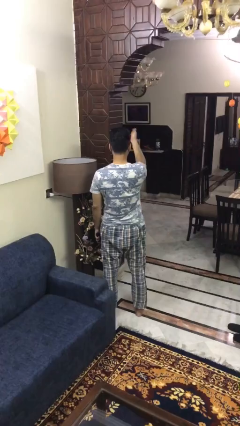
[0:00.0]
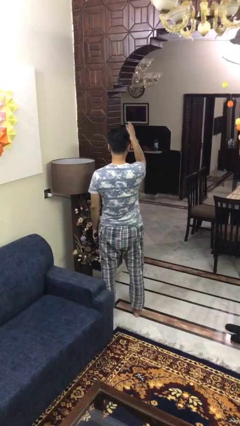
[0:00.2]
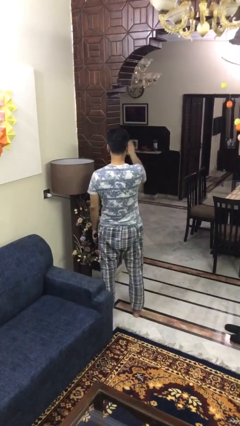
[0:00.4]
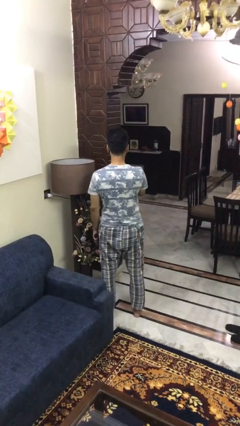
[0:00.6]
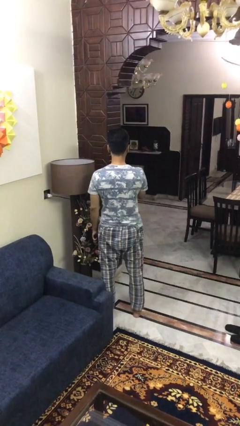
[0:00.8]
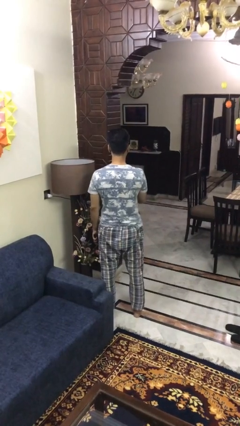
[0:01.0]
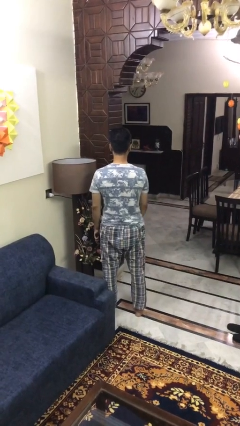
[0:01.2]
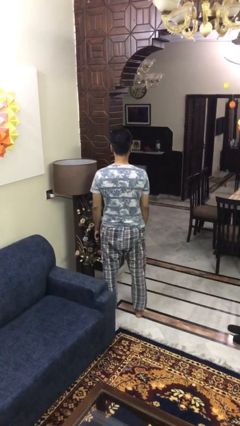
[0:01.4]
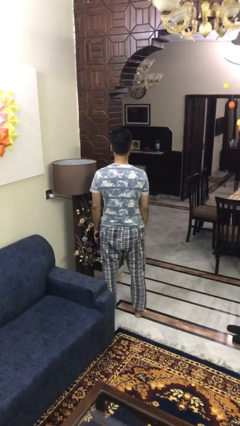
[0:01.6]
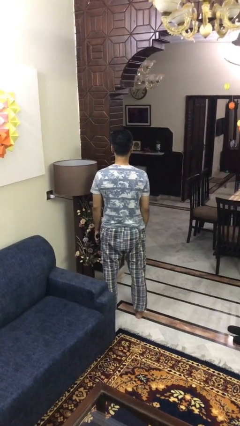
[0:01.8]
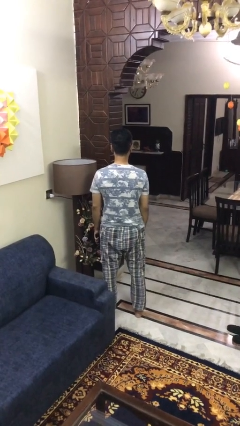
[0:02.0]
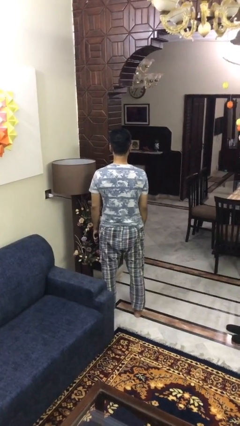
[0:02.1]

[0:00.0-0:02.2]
person gestures swipe down

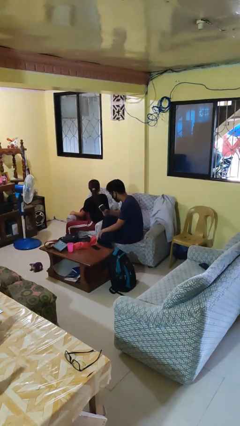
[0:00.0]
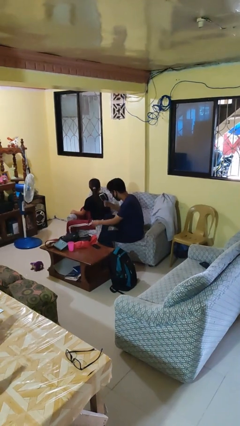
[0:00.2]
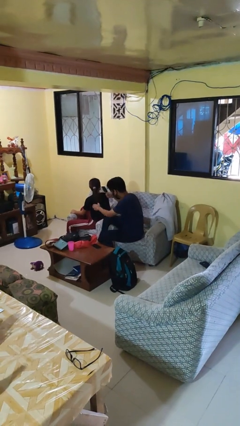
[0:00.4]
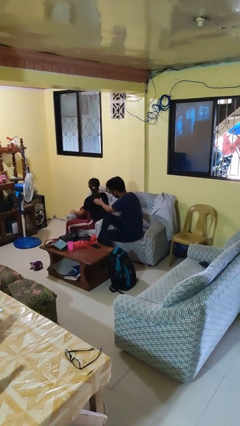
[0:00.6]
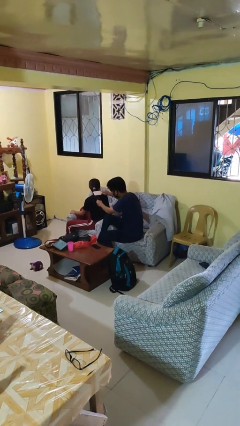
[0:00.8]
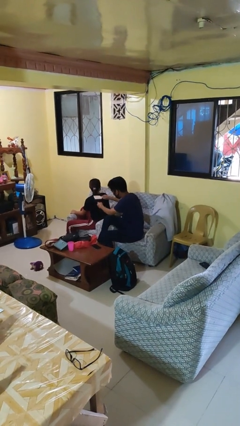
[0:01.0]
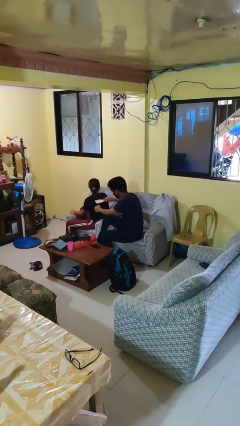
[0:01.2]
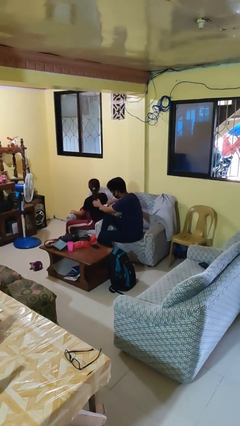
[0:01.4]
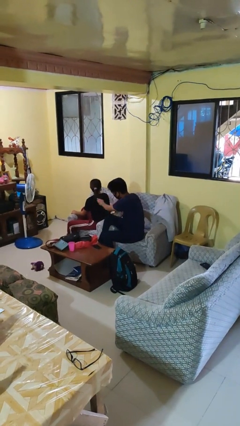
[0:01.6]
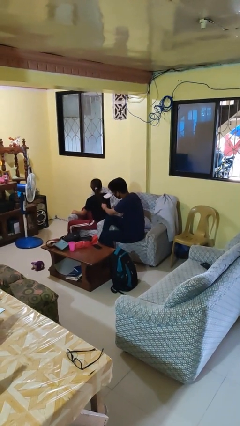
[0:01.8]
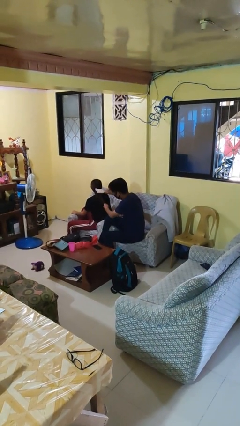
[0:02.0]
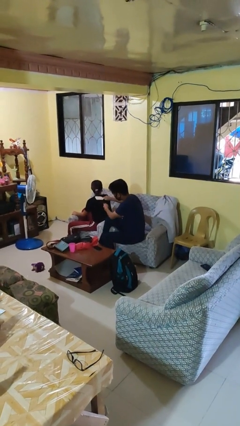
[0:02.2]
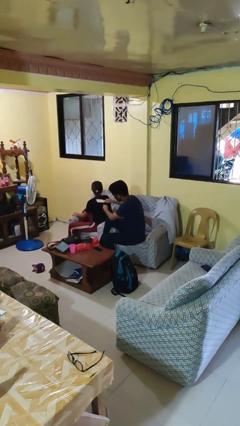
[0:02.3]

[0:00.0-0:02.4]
person brushes hair of person

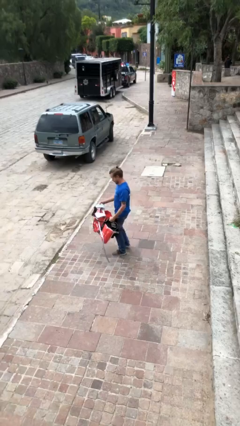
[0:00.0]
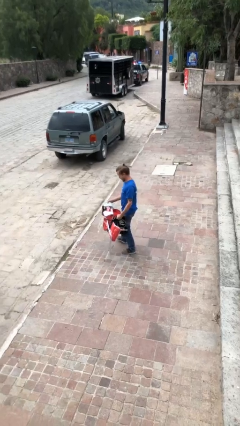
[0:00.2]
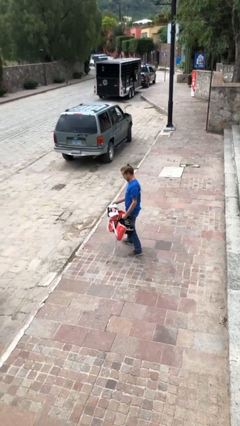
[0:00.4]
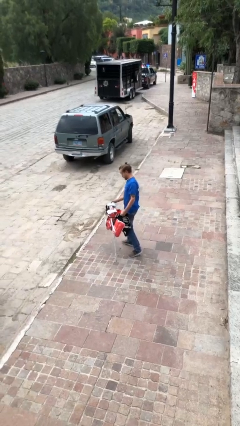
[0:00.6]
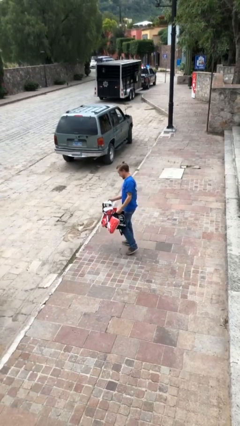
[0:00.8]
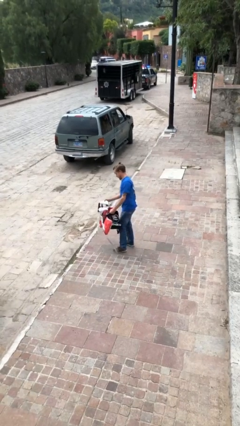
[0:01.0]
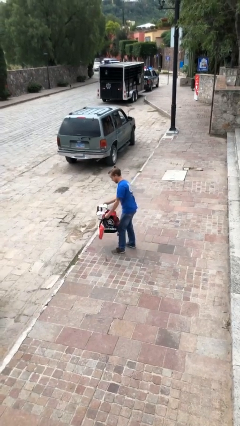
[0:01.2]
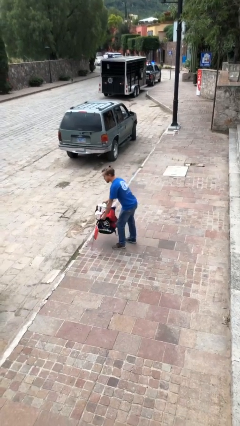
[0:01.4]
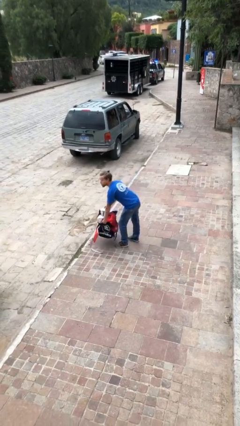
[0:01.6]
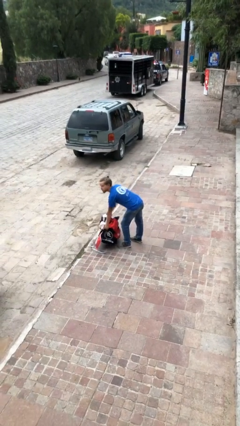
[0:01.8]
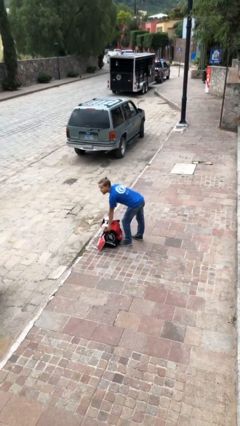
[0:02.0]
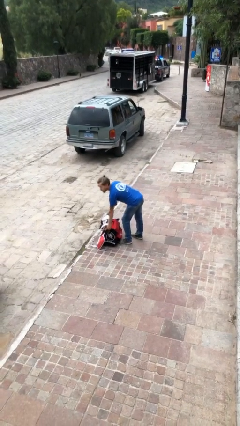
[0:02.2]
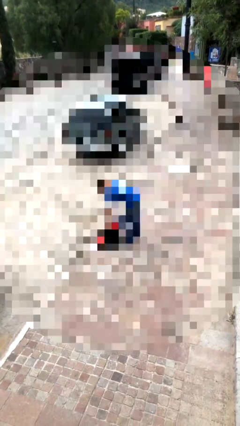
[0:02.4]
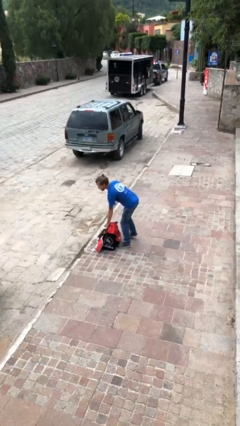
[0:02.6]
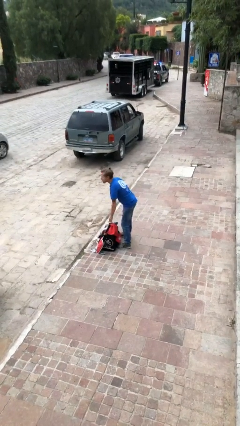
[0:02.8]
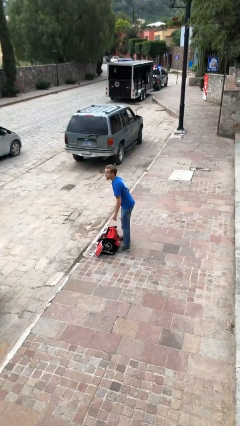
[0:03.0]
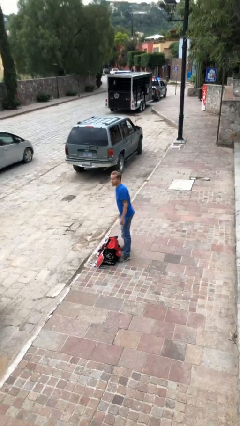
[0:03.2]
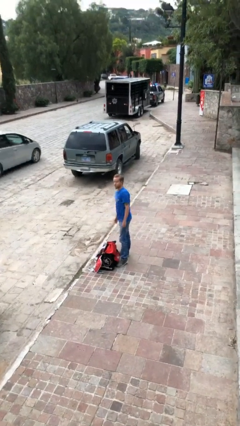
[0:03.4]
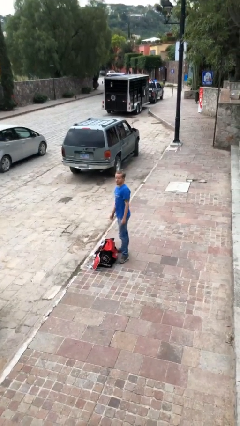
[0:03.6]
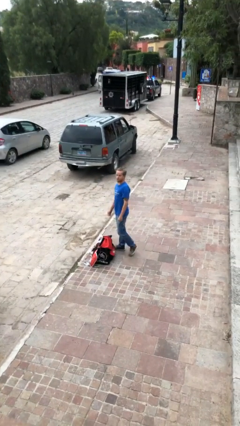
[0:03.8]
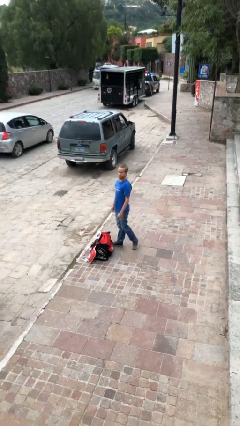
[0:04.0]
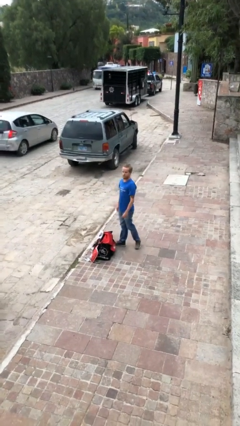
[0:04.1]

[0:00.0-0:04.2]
person puts down object on floor

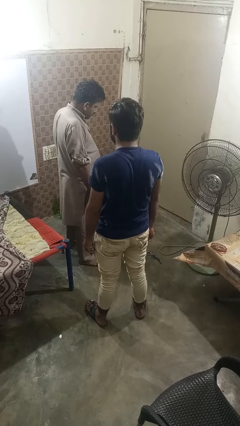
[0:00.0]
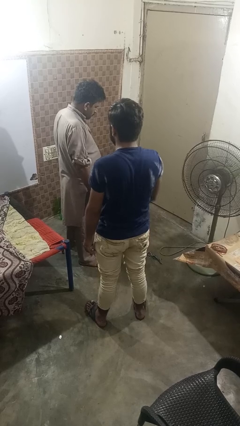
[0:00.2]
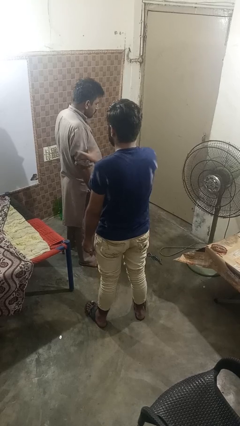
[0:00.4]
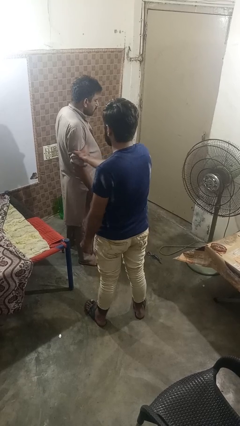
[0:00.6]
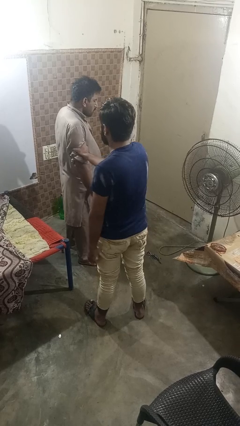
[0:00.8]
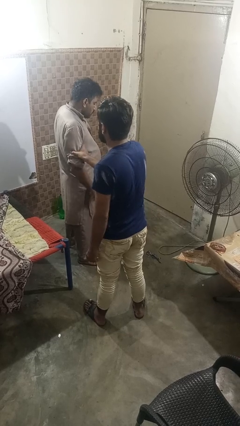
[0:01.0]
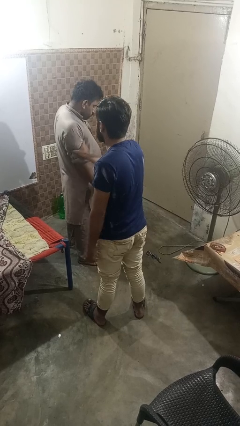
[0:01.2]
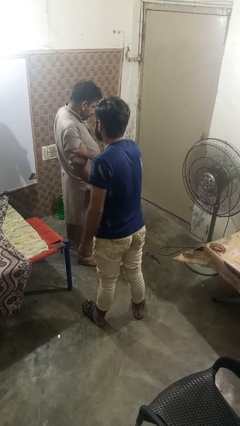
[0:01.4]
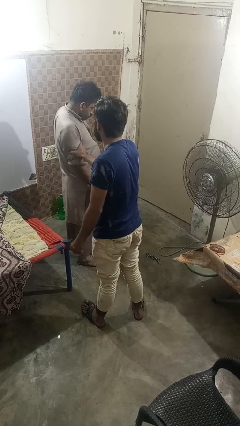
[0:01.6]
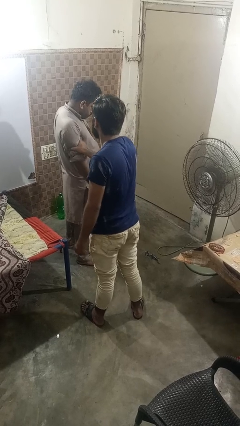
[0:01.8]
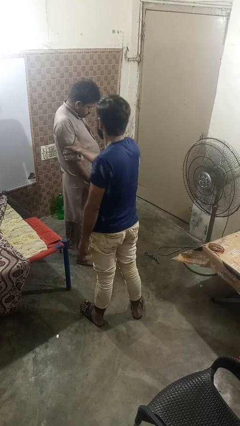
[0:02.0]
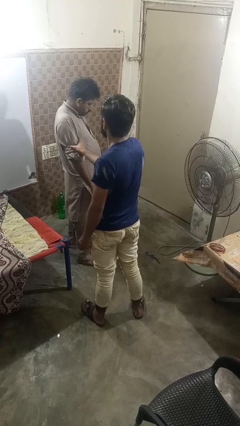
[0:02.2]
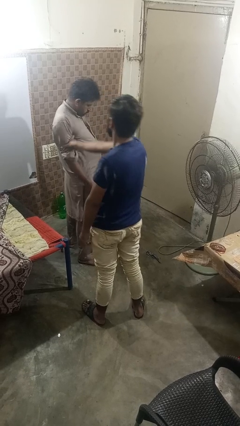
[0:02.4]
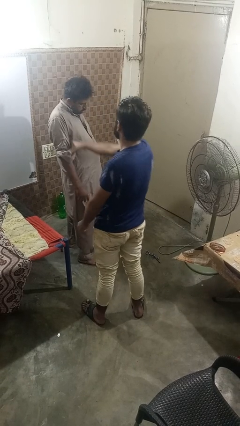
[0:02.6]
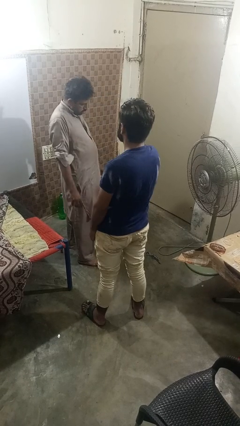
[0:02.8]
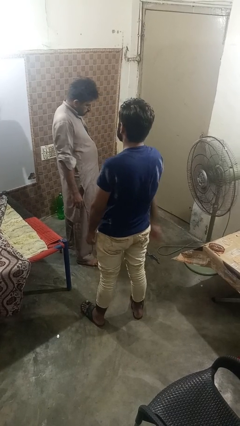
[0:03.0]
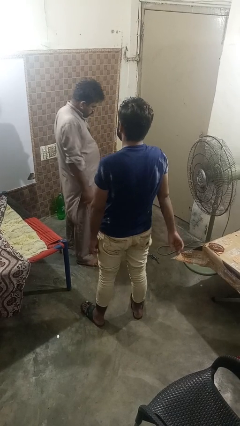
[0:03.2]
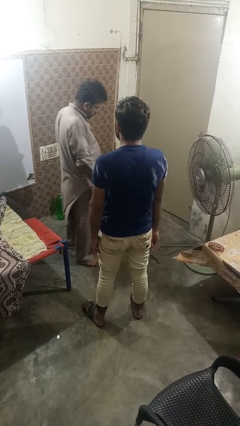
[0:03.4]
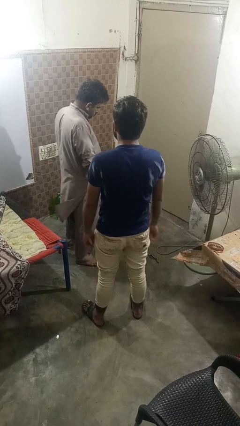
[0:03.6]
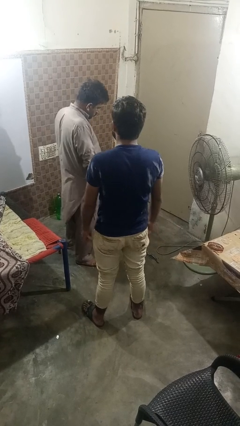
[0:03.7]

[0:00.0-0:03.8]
person grabs person by bicep

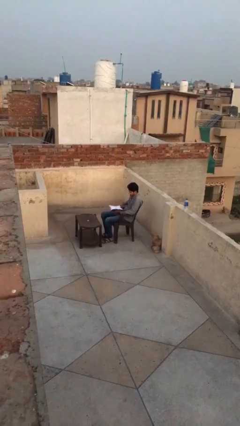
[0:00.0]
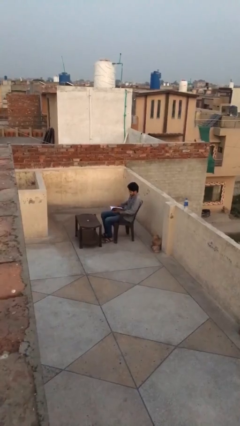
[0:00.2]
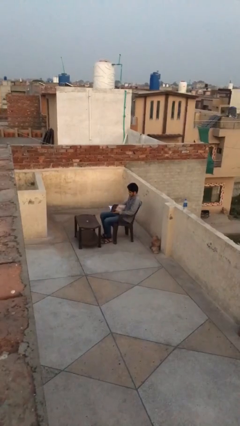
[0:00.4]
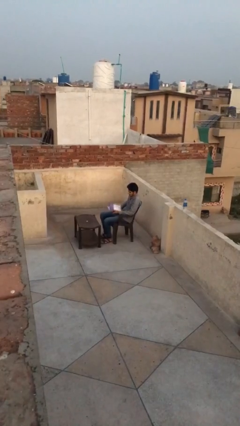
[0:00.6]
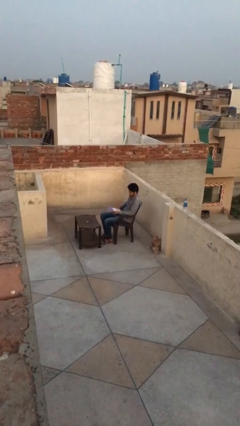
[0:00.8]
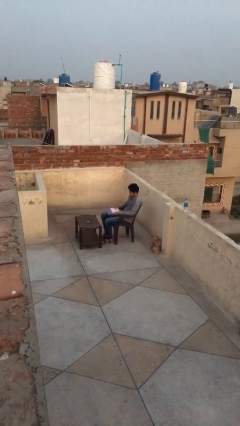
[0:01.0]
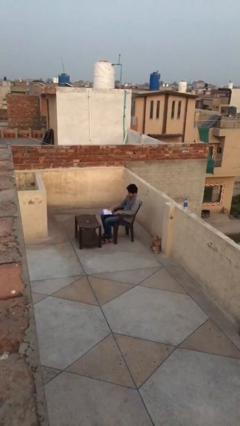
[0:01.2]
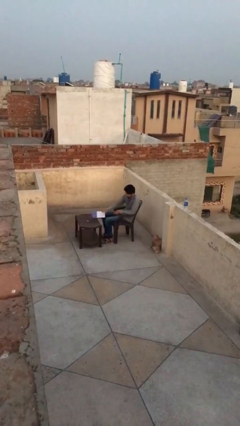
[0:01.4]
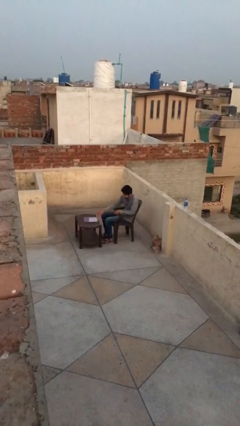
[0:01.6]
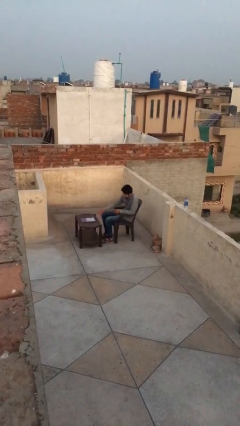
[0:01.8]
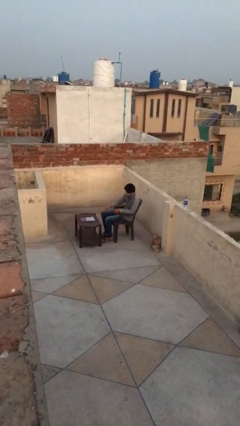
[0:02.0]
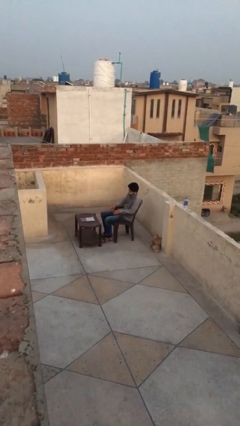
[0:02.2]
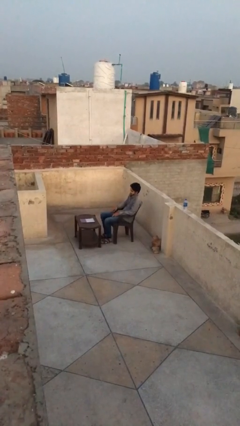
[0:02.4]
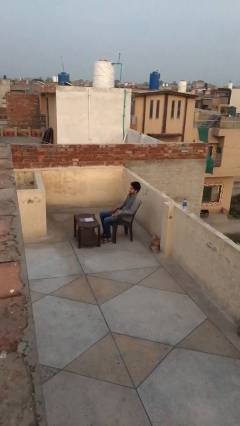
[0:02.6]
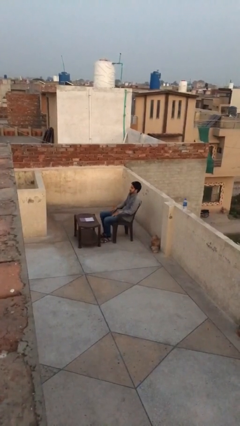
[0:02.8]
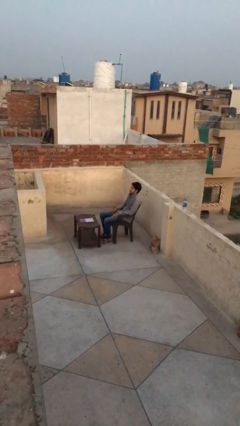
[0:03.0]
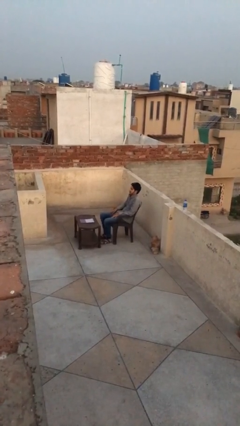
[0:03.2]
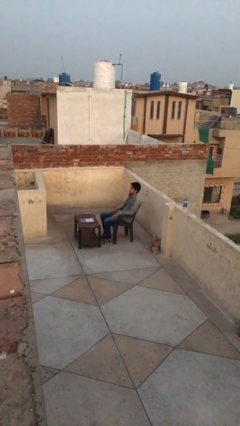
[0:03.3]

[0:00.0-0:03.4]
person puts down object on table

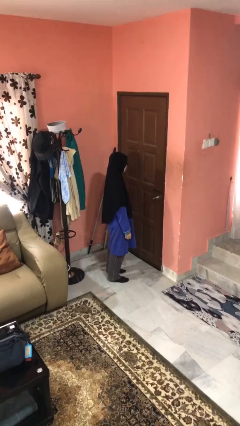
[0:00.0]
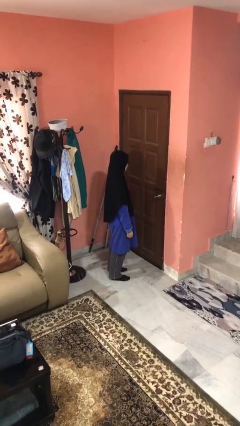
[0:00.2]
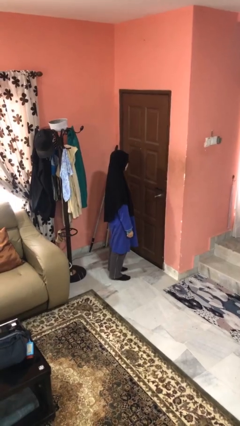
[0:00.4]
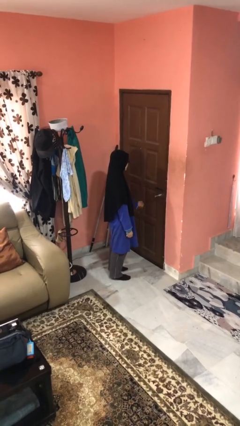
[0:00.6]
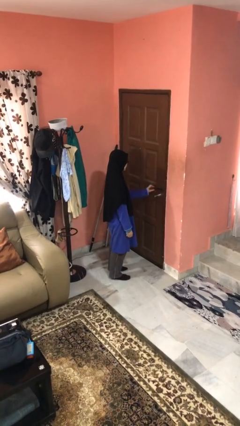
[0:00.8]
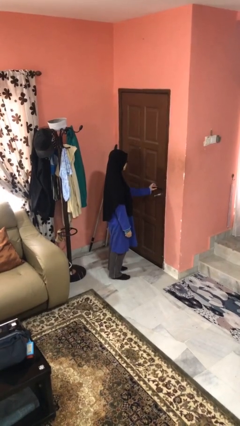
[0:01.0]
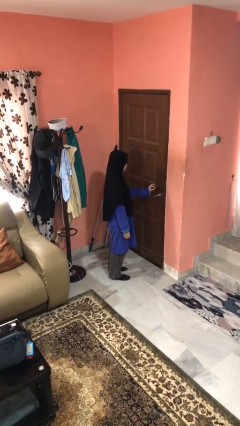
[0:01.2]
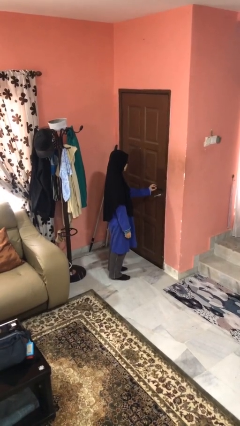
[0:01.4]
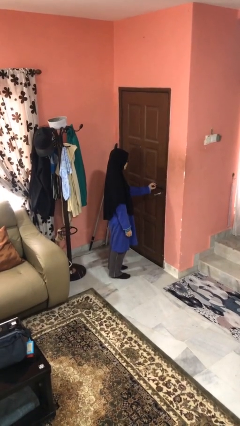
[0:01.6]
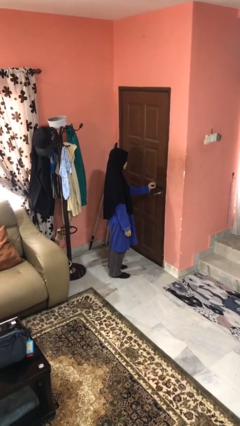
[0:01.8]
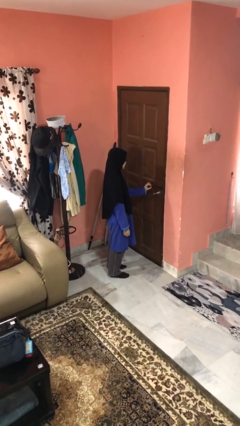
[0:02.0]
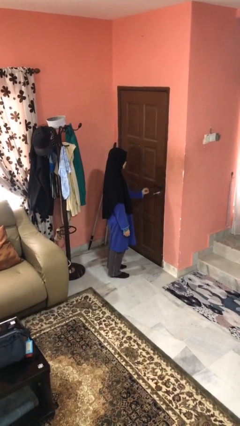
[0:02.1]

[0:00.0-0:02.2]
person unlocks door with keys
